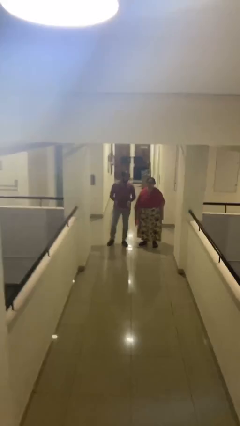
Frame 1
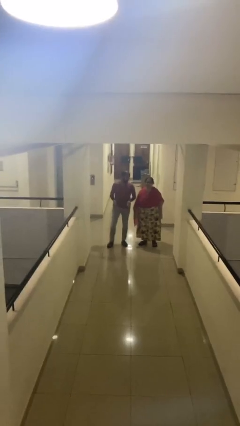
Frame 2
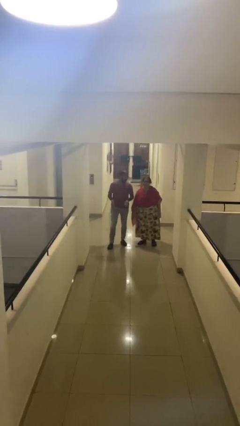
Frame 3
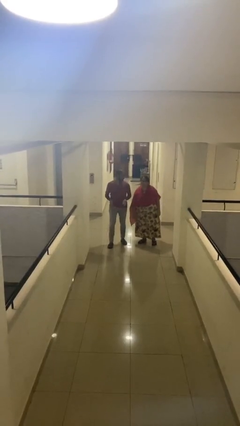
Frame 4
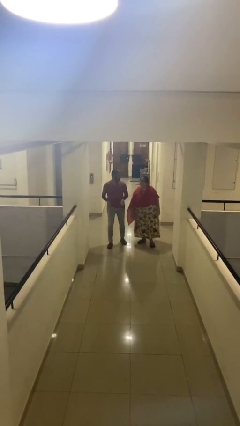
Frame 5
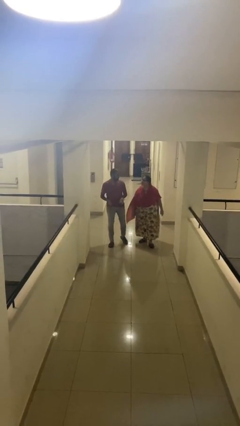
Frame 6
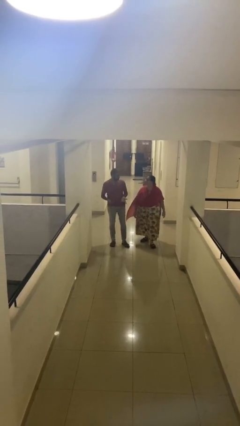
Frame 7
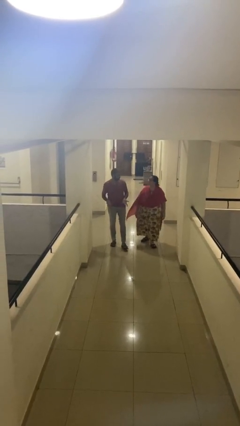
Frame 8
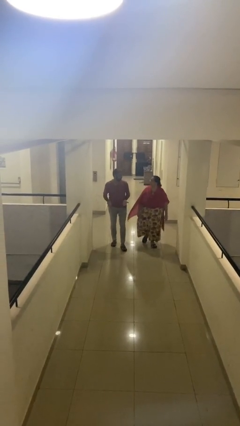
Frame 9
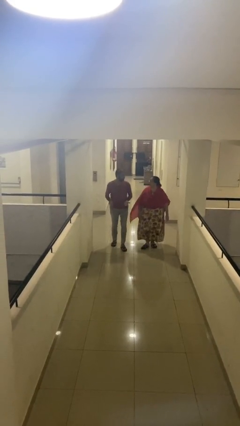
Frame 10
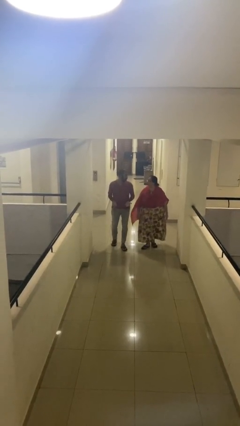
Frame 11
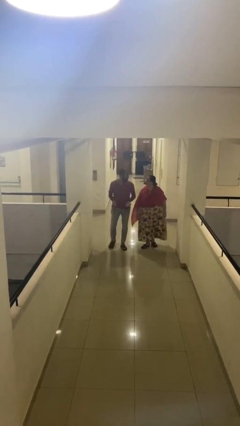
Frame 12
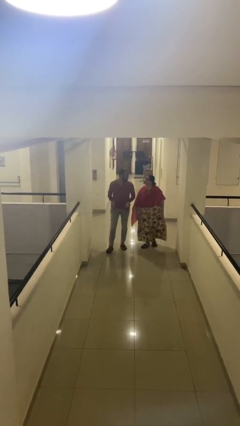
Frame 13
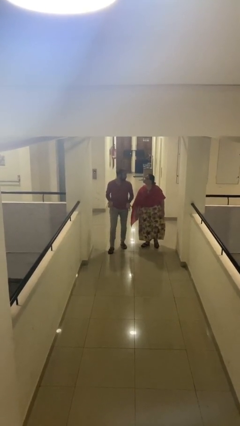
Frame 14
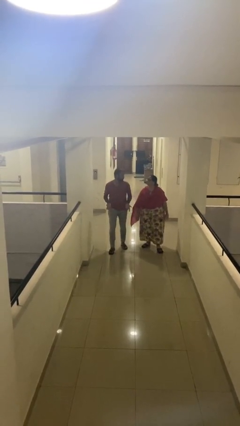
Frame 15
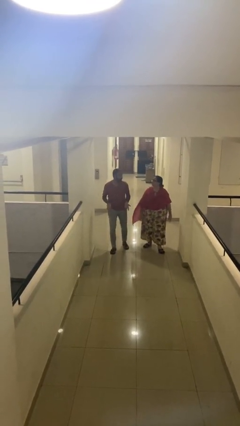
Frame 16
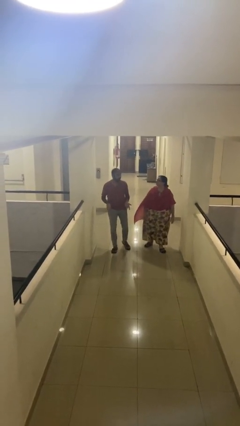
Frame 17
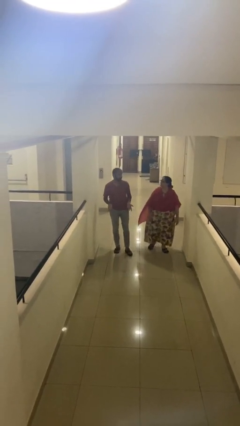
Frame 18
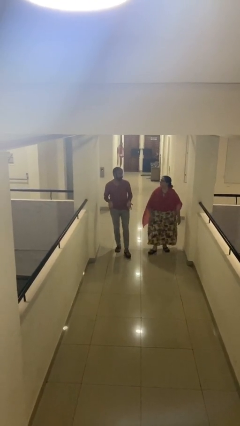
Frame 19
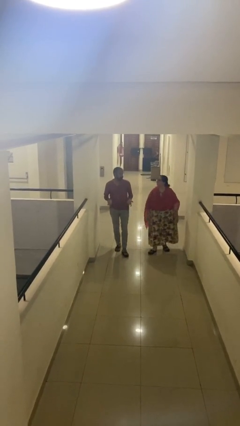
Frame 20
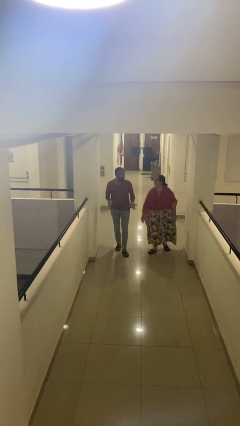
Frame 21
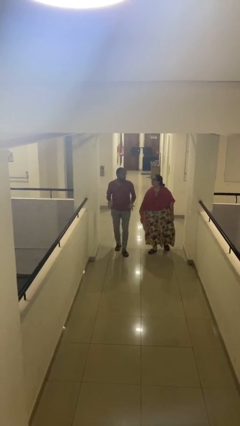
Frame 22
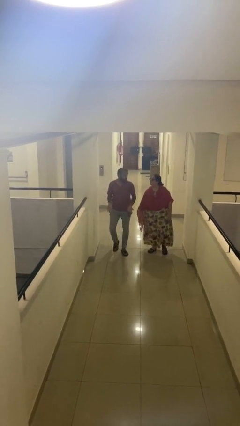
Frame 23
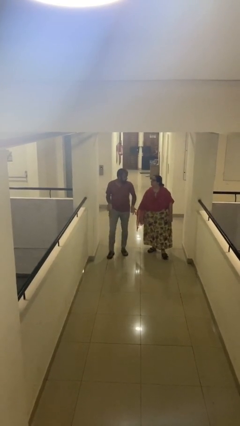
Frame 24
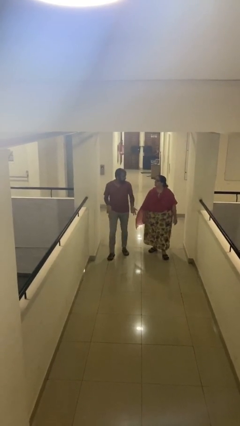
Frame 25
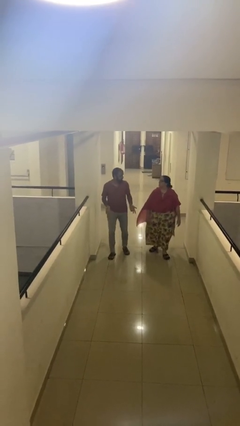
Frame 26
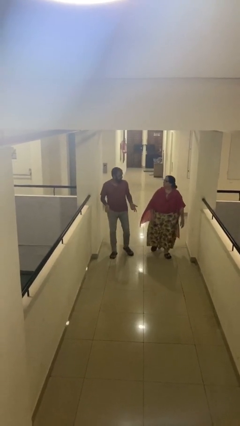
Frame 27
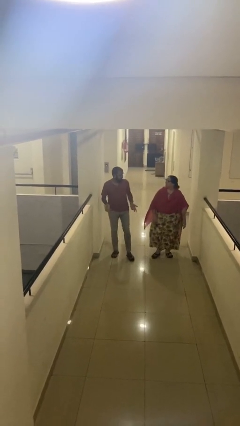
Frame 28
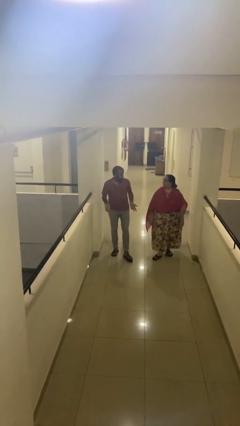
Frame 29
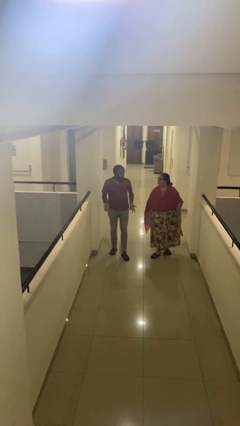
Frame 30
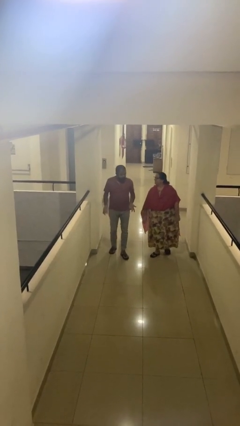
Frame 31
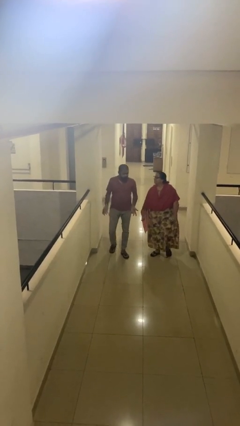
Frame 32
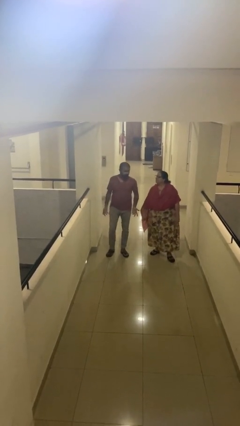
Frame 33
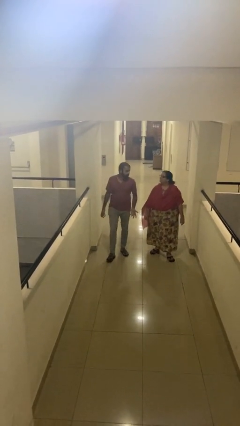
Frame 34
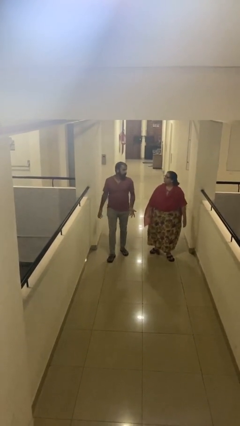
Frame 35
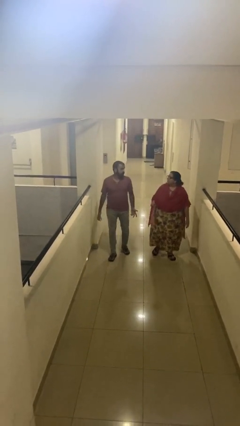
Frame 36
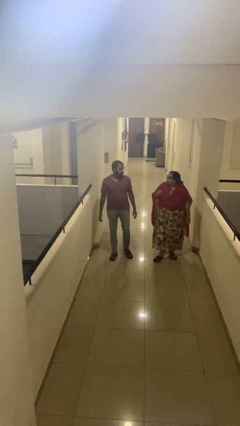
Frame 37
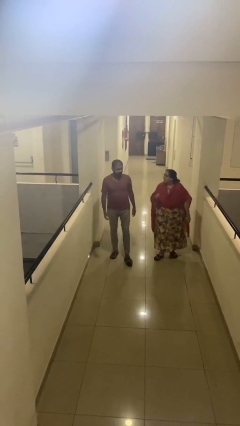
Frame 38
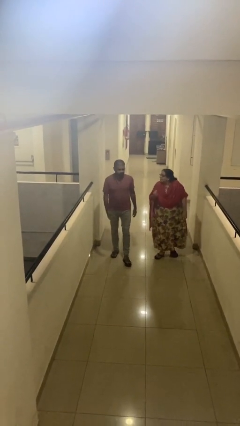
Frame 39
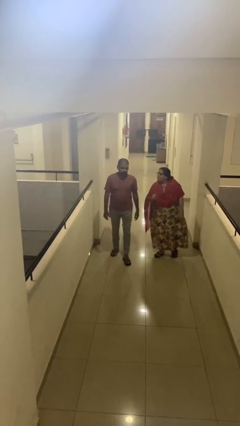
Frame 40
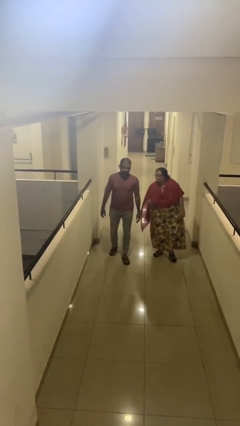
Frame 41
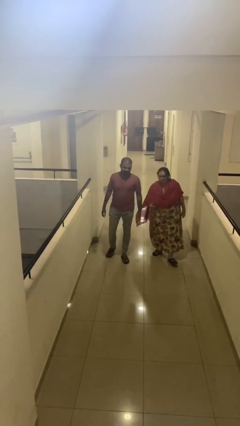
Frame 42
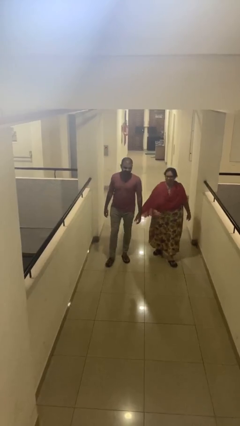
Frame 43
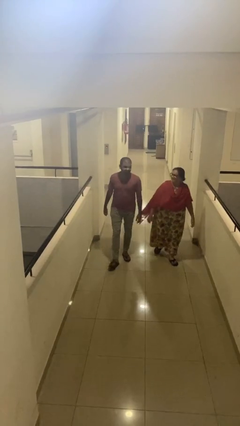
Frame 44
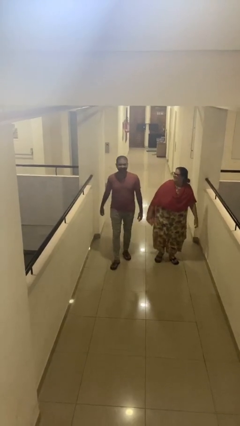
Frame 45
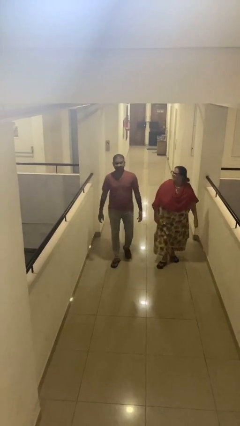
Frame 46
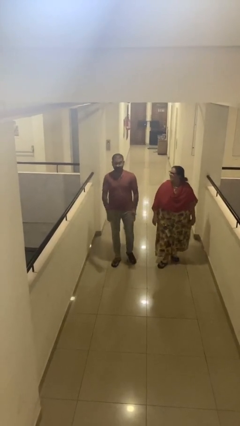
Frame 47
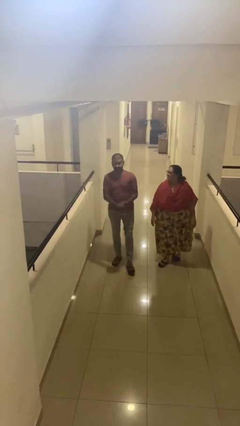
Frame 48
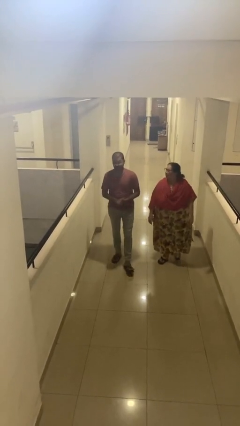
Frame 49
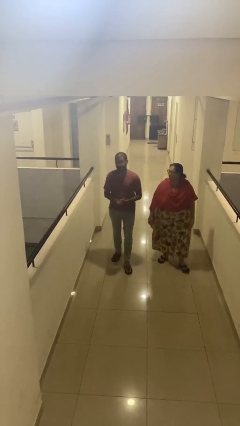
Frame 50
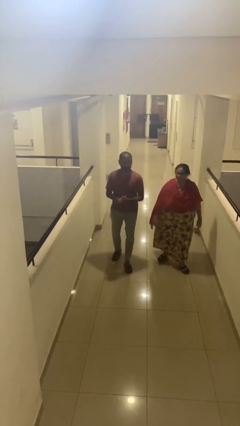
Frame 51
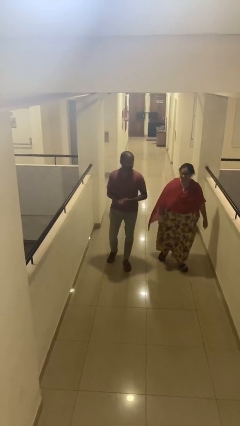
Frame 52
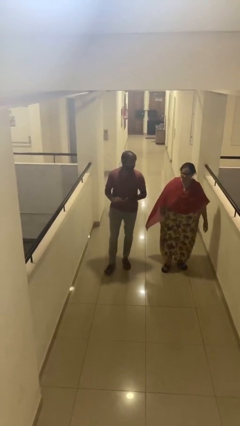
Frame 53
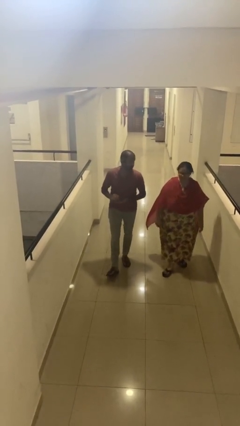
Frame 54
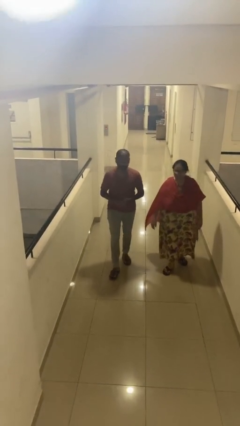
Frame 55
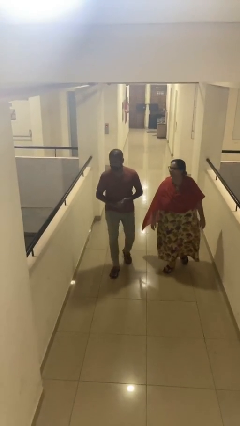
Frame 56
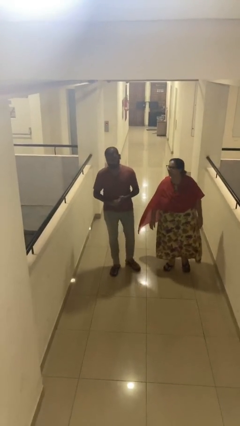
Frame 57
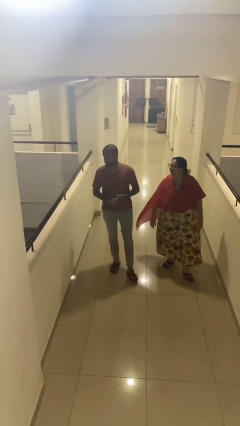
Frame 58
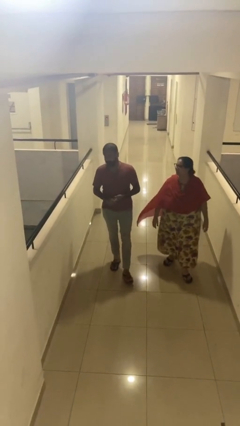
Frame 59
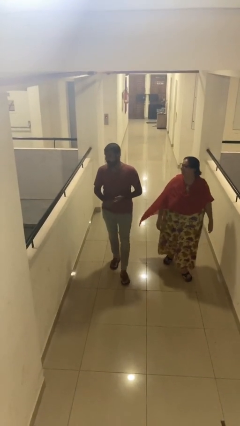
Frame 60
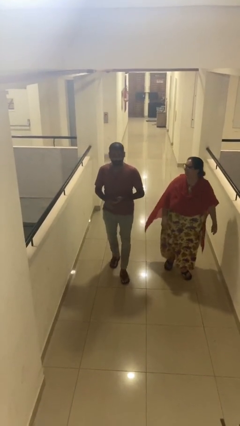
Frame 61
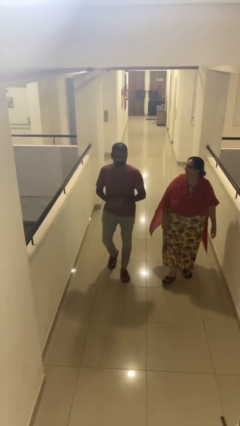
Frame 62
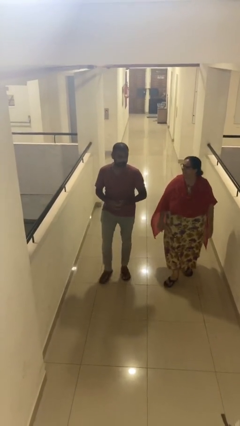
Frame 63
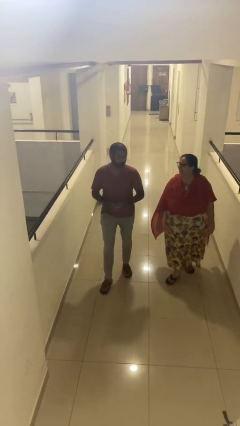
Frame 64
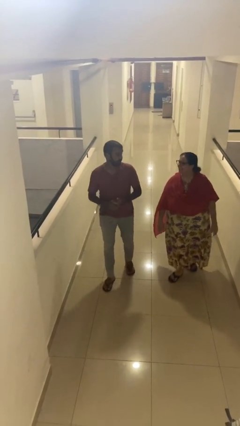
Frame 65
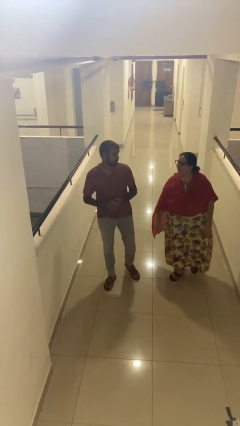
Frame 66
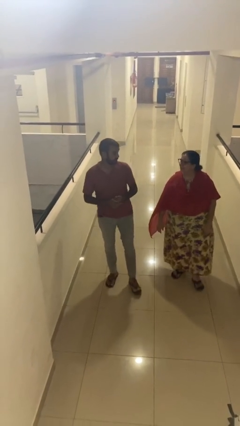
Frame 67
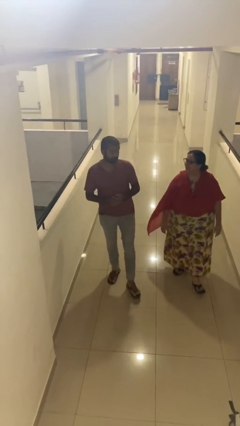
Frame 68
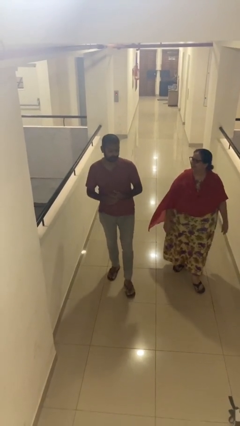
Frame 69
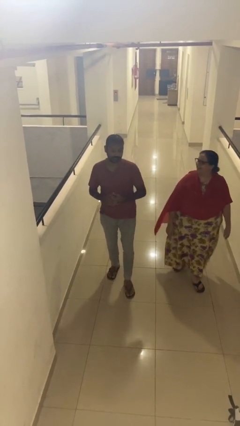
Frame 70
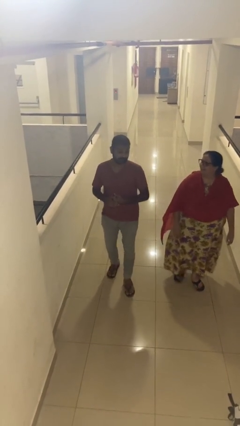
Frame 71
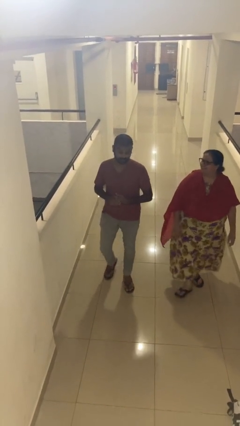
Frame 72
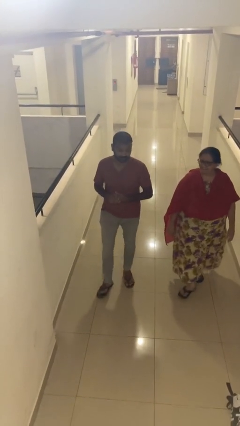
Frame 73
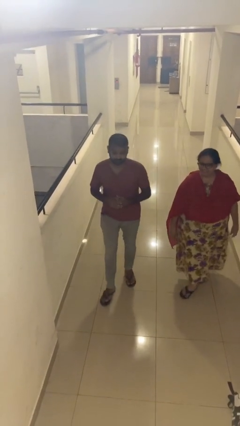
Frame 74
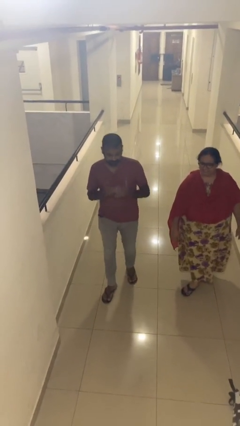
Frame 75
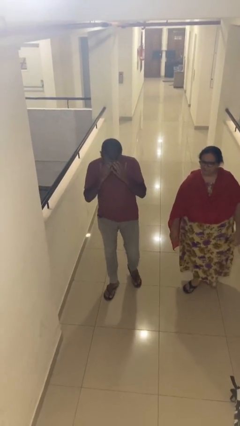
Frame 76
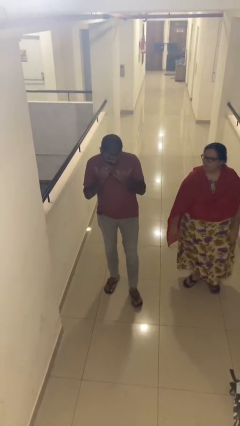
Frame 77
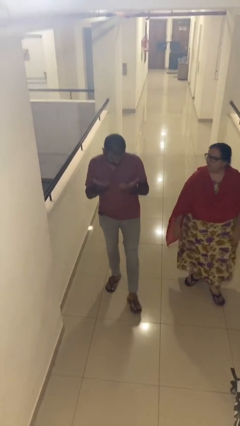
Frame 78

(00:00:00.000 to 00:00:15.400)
person talks to person

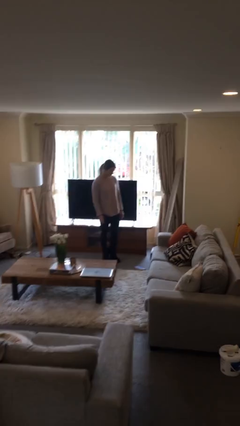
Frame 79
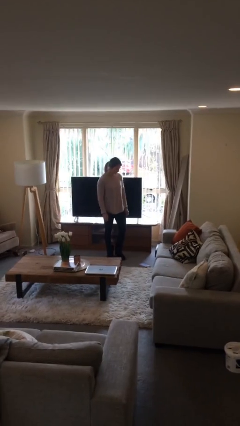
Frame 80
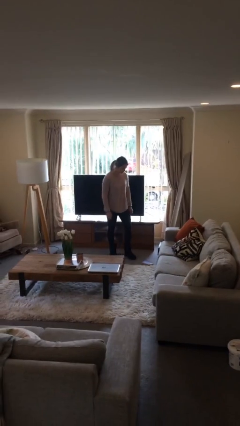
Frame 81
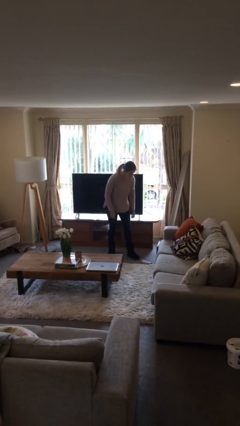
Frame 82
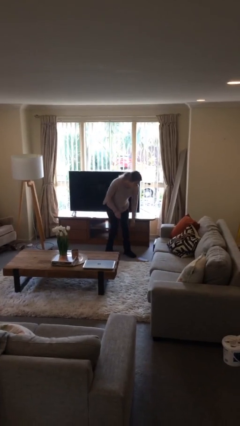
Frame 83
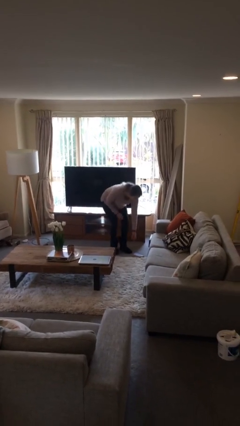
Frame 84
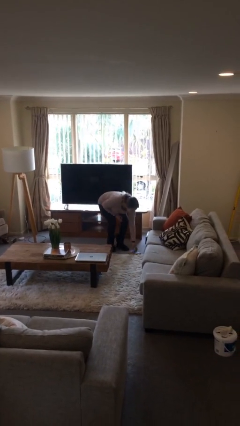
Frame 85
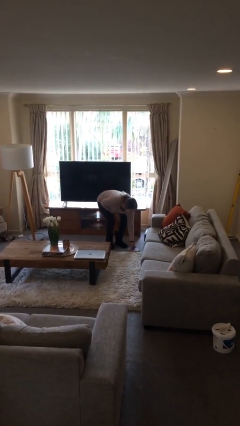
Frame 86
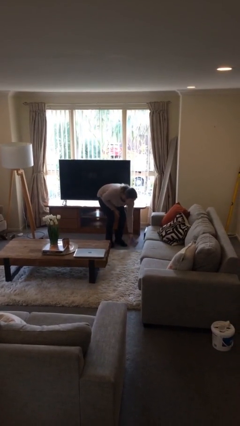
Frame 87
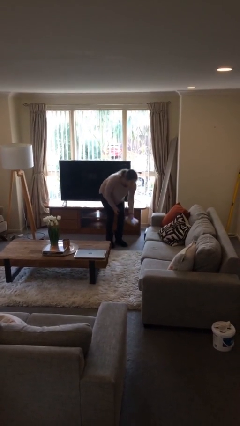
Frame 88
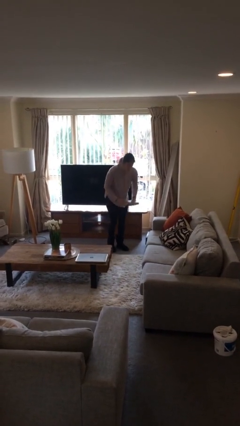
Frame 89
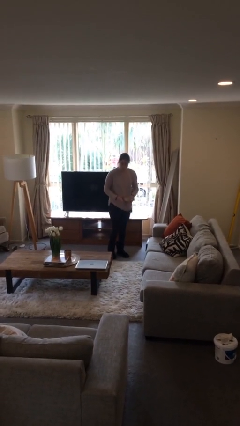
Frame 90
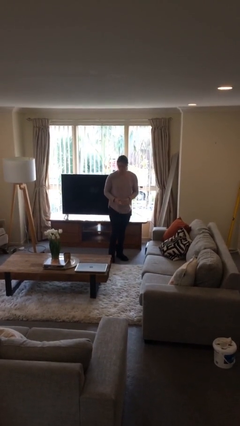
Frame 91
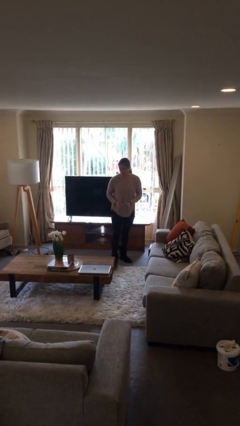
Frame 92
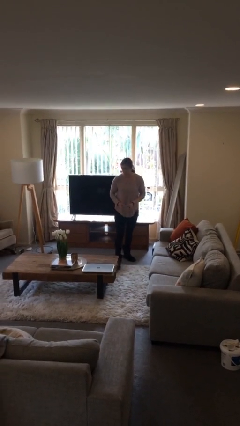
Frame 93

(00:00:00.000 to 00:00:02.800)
person picks up object from floor
